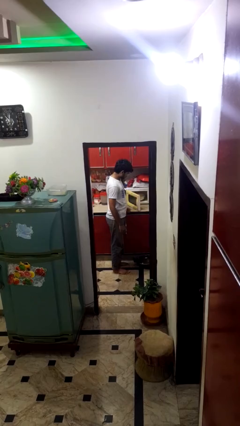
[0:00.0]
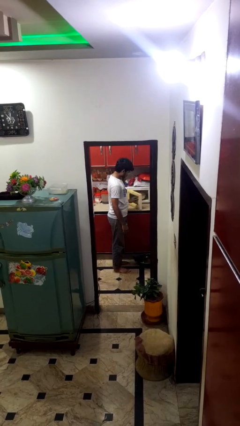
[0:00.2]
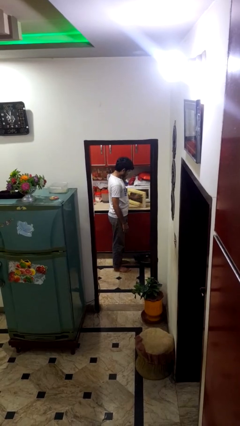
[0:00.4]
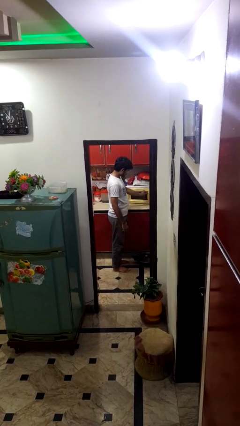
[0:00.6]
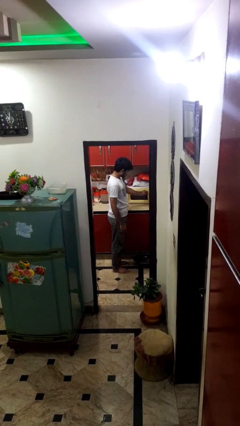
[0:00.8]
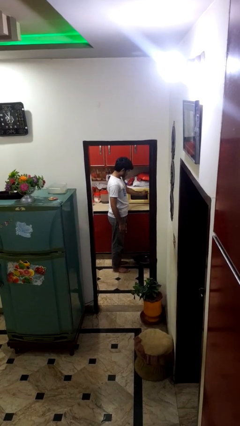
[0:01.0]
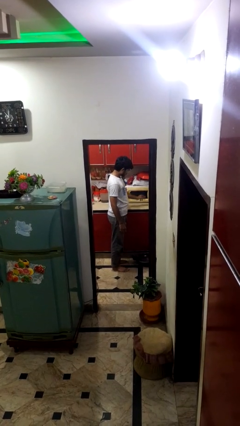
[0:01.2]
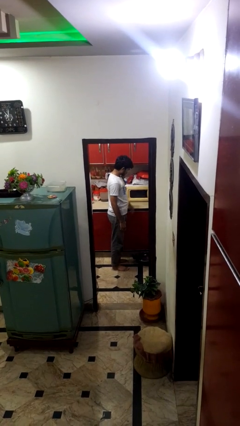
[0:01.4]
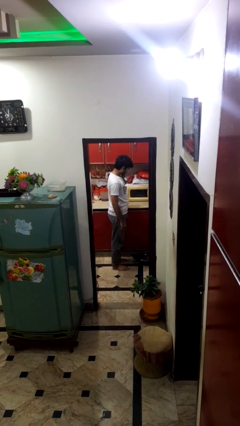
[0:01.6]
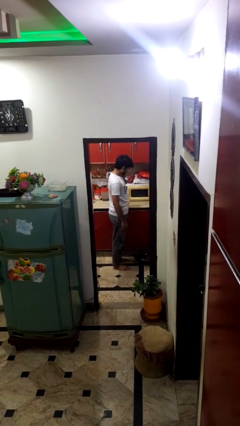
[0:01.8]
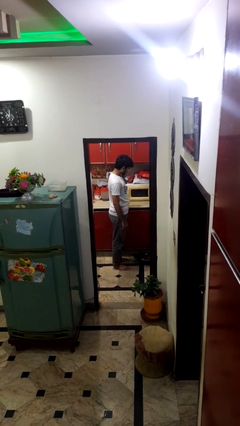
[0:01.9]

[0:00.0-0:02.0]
person closes microwave

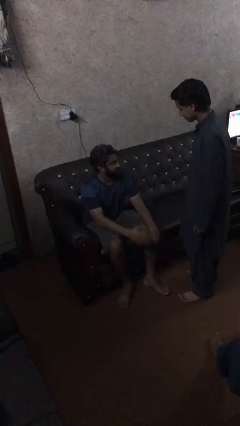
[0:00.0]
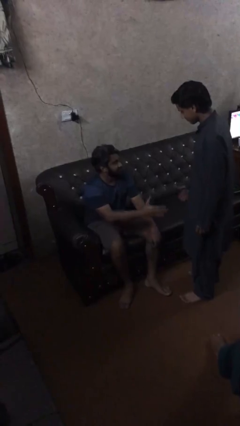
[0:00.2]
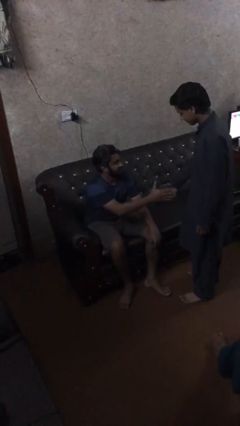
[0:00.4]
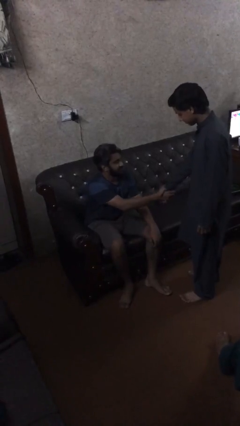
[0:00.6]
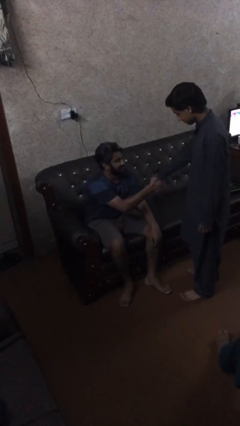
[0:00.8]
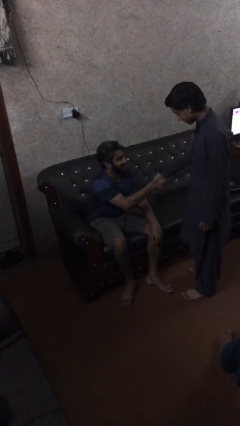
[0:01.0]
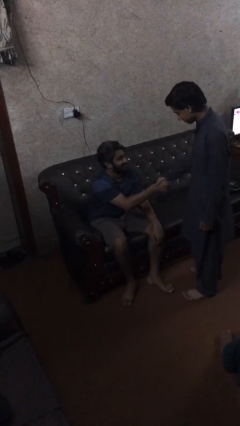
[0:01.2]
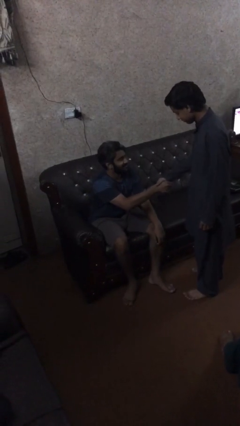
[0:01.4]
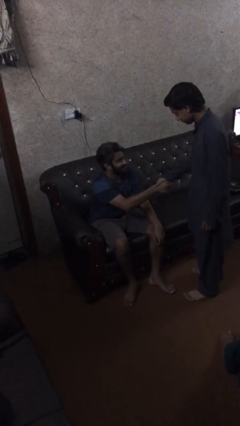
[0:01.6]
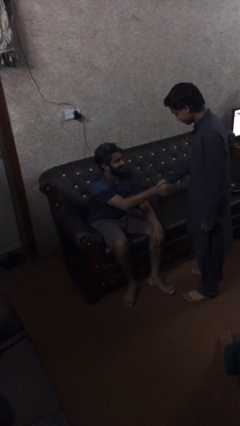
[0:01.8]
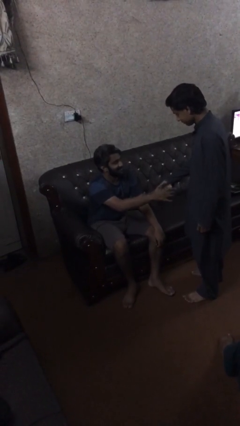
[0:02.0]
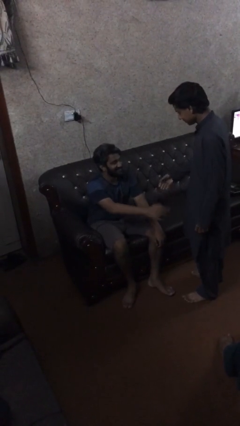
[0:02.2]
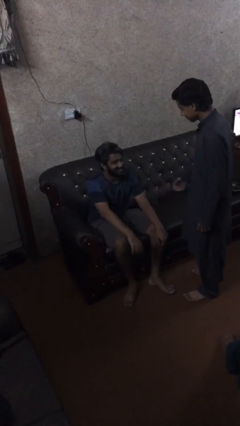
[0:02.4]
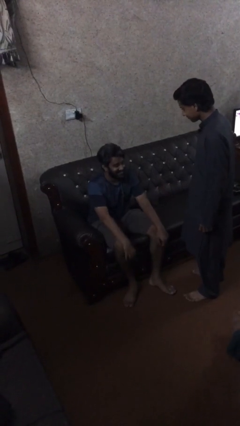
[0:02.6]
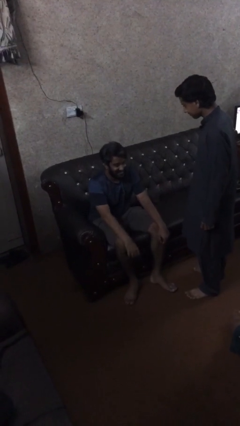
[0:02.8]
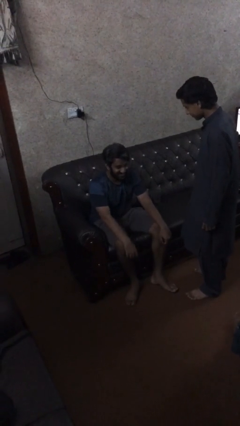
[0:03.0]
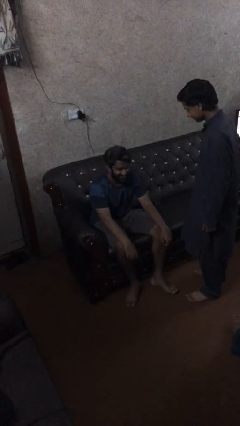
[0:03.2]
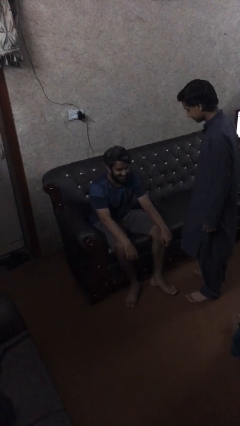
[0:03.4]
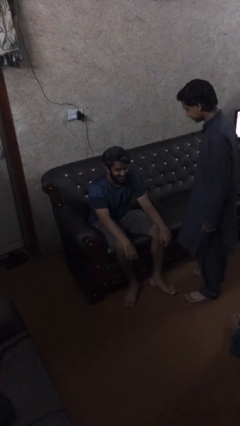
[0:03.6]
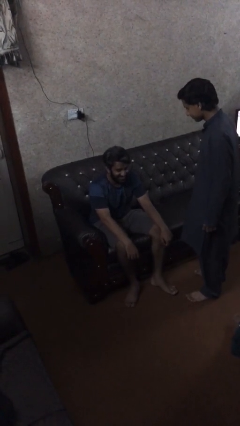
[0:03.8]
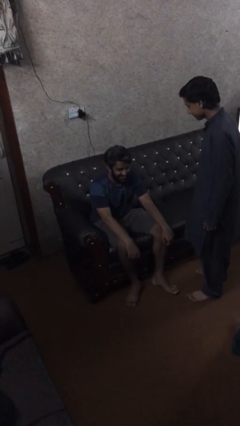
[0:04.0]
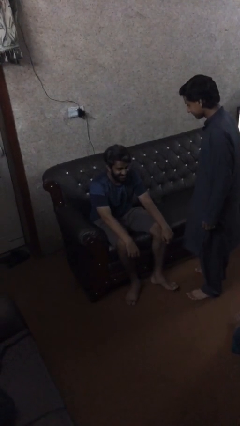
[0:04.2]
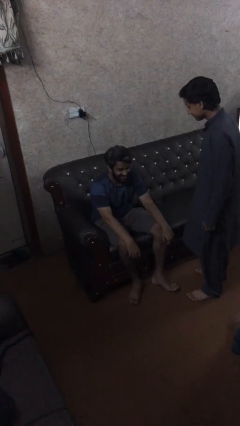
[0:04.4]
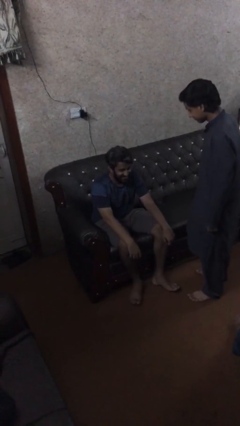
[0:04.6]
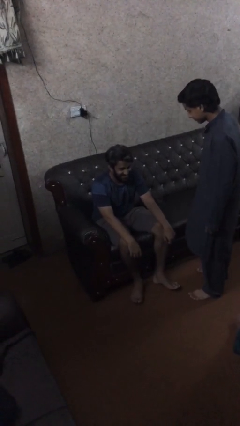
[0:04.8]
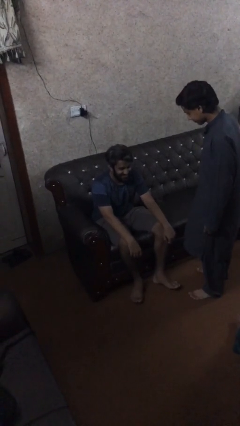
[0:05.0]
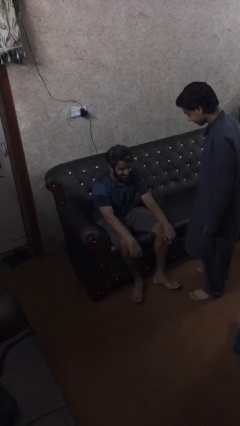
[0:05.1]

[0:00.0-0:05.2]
person shakes hand

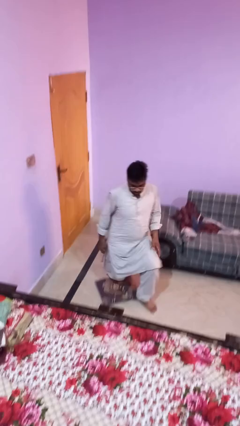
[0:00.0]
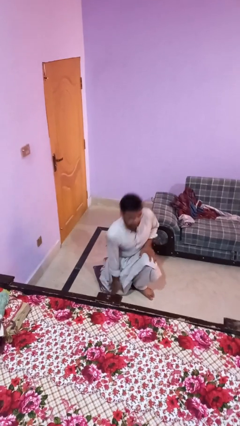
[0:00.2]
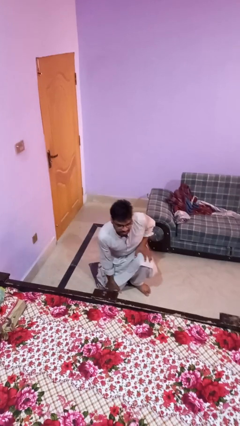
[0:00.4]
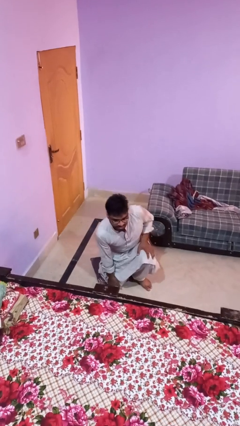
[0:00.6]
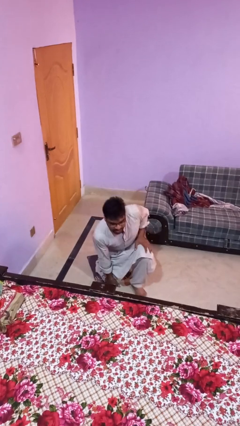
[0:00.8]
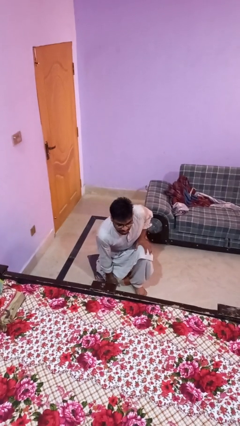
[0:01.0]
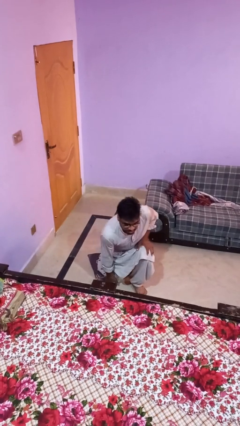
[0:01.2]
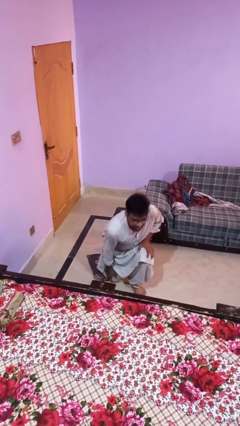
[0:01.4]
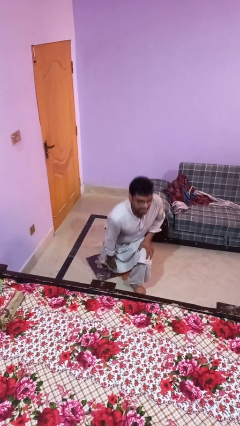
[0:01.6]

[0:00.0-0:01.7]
person trips on object on floor

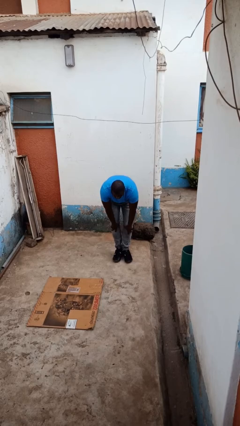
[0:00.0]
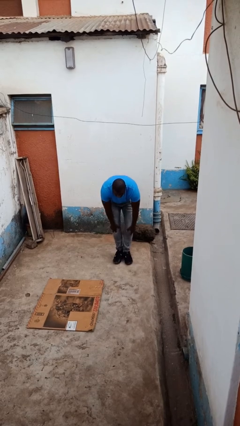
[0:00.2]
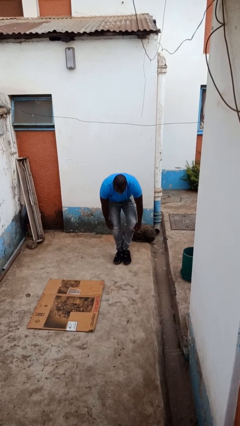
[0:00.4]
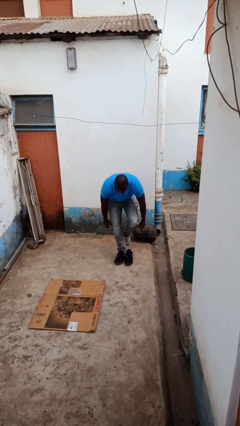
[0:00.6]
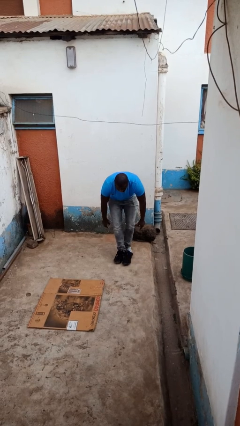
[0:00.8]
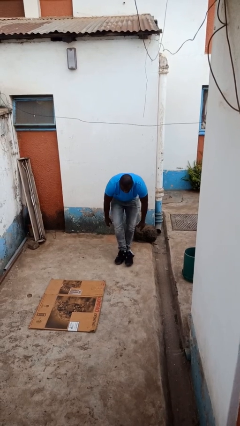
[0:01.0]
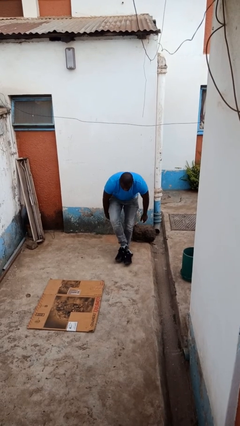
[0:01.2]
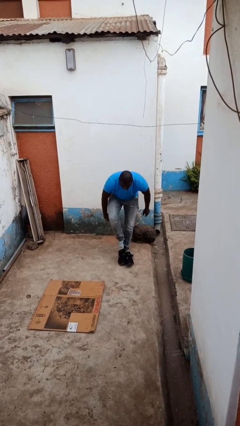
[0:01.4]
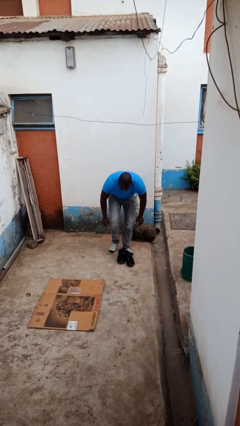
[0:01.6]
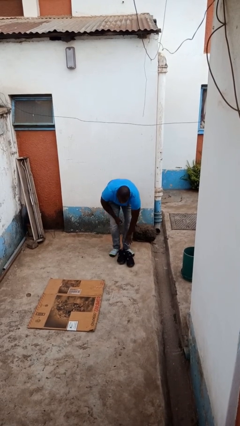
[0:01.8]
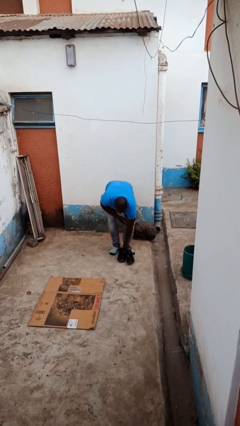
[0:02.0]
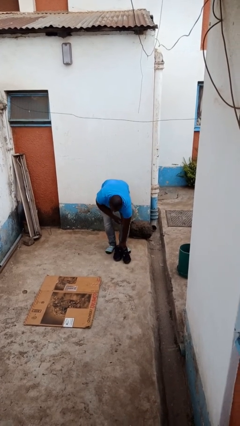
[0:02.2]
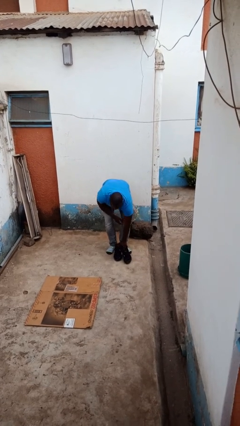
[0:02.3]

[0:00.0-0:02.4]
person takes off shoes

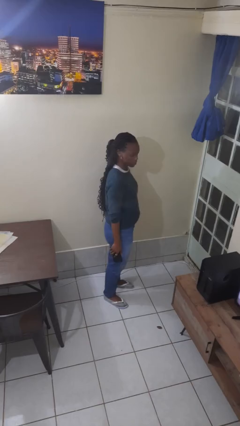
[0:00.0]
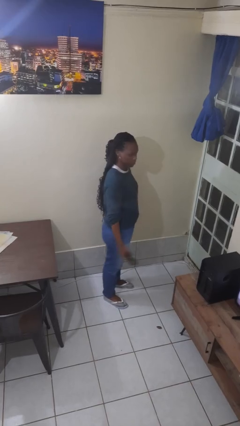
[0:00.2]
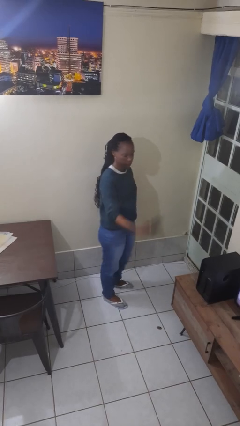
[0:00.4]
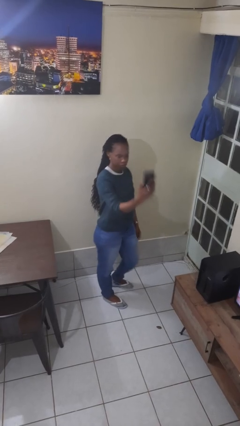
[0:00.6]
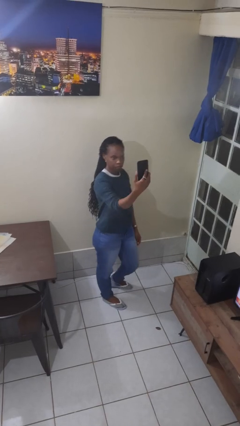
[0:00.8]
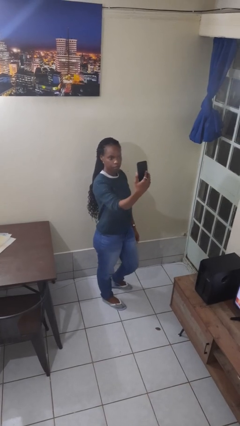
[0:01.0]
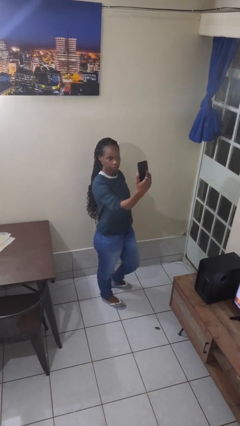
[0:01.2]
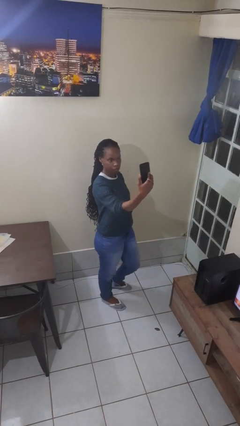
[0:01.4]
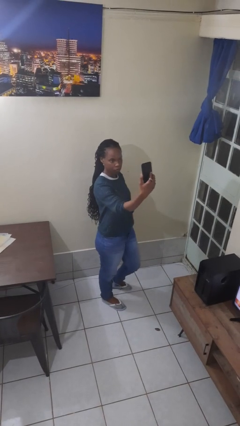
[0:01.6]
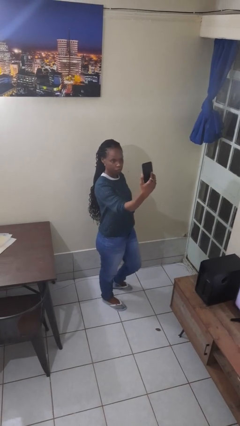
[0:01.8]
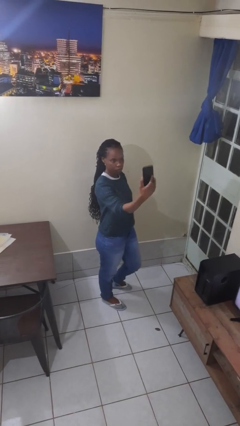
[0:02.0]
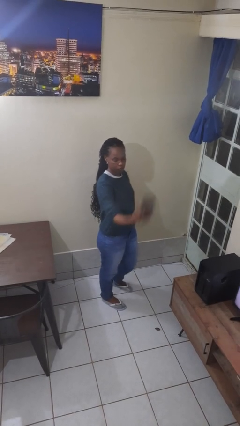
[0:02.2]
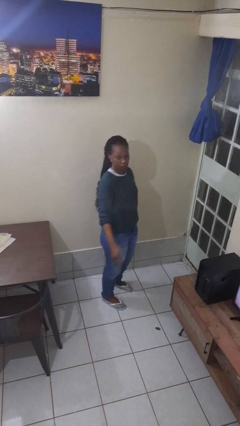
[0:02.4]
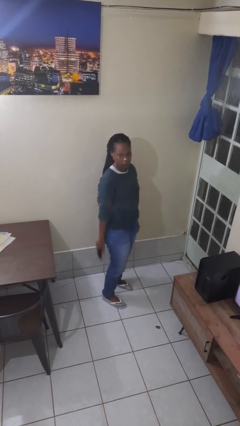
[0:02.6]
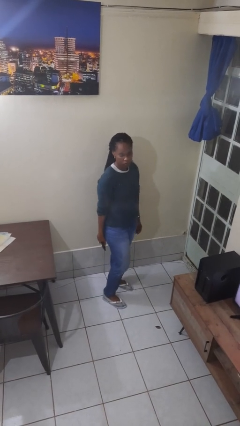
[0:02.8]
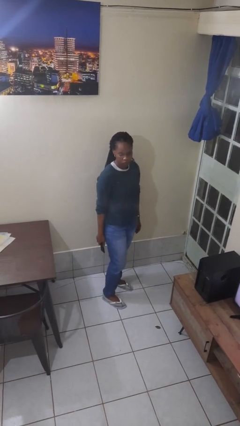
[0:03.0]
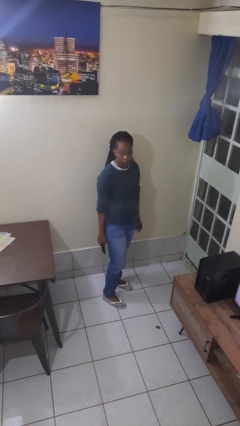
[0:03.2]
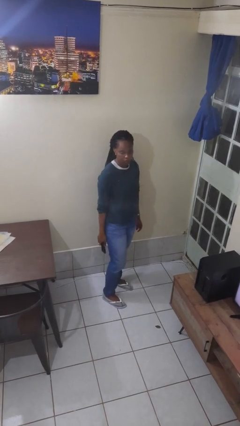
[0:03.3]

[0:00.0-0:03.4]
person takes selfie

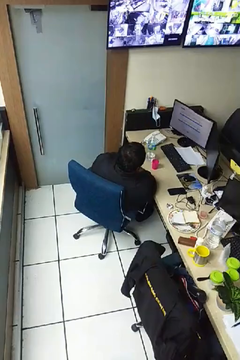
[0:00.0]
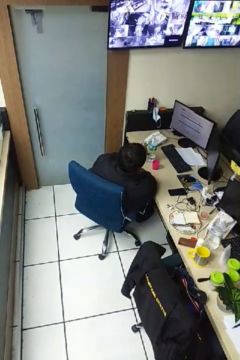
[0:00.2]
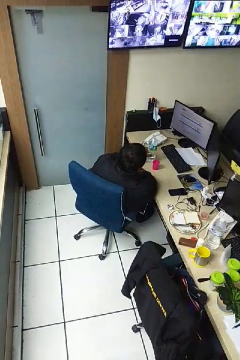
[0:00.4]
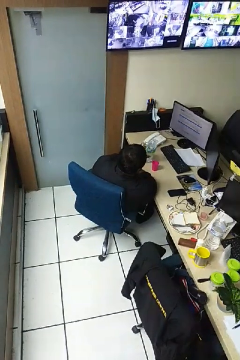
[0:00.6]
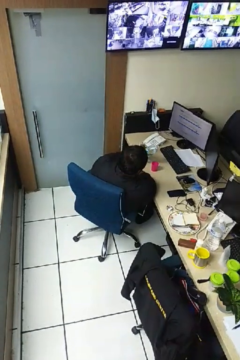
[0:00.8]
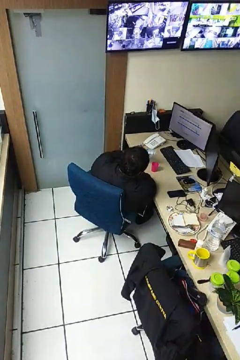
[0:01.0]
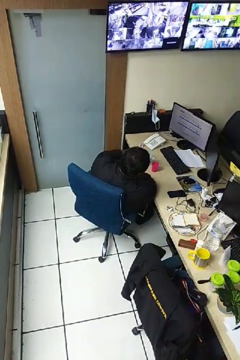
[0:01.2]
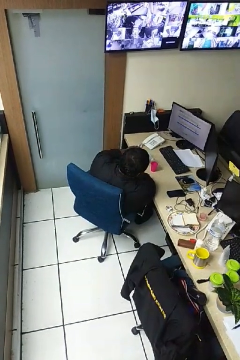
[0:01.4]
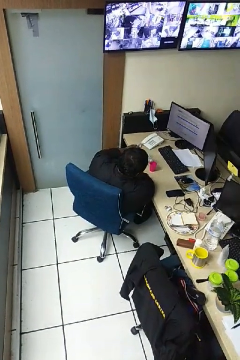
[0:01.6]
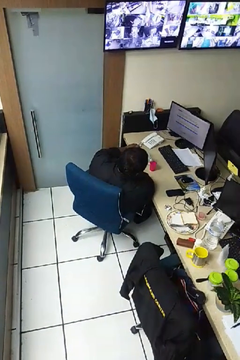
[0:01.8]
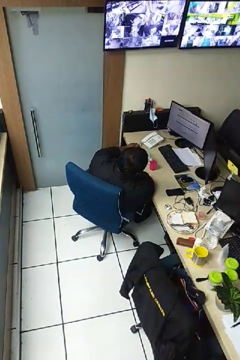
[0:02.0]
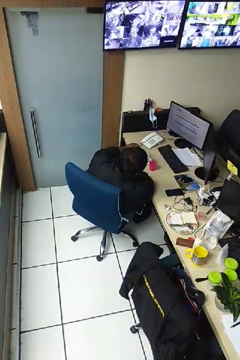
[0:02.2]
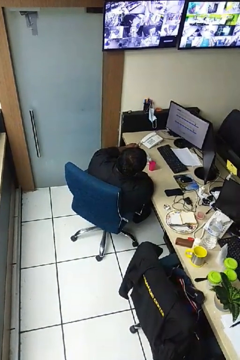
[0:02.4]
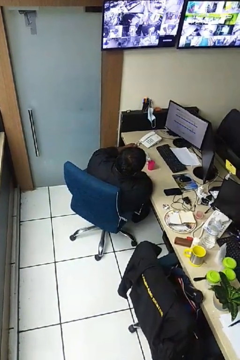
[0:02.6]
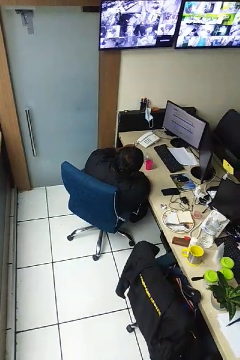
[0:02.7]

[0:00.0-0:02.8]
person pours liquid into cup
